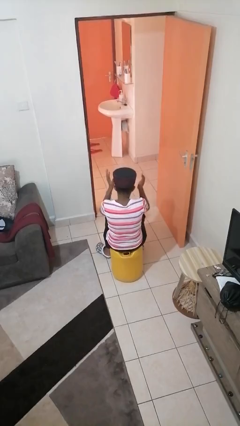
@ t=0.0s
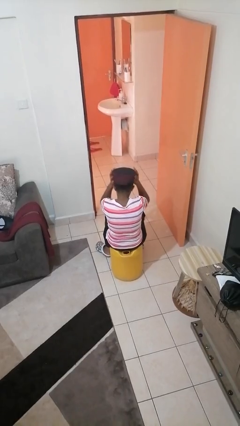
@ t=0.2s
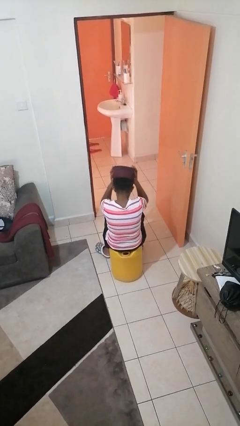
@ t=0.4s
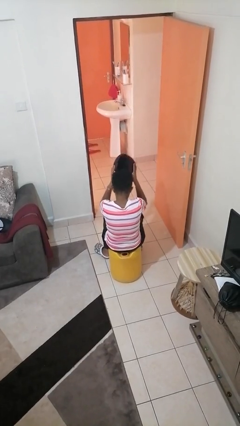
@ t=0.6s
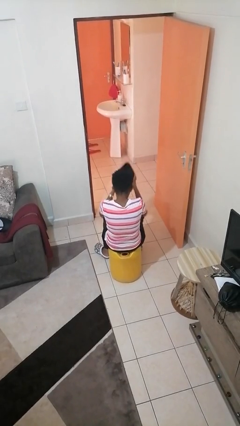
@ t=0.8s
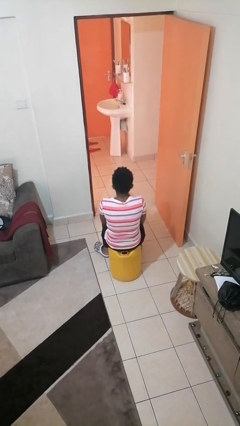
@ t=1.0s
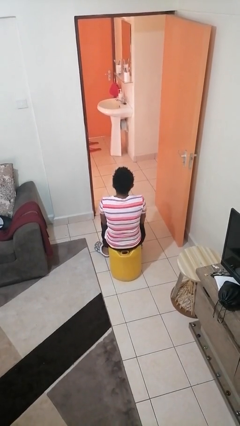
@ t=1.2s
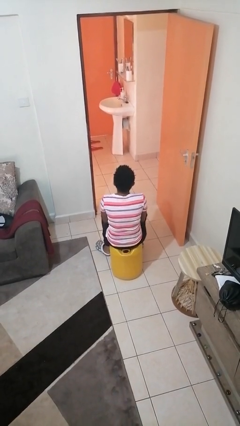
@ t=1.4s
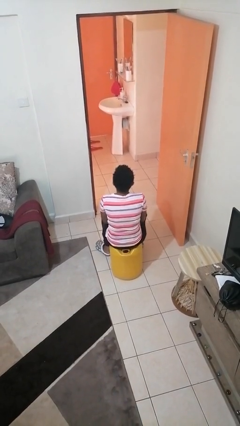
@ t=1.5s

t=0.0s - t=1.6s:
person takes off hat

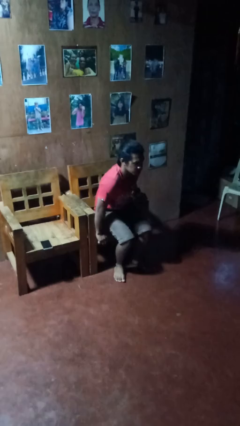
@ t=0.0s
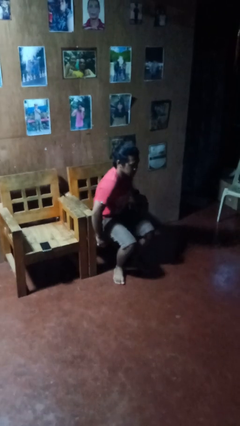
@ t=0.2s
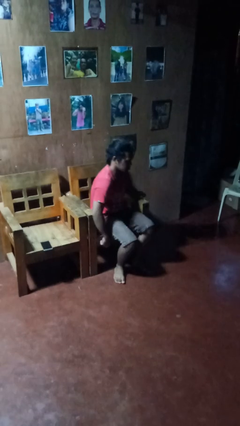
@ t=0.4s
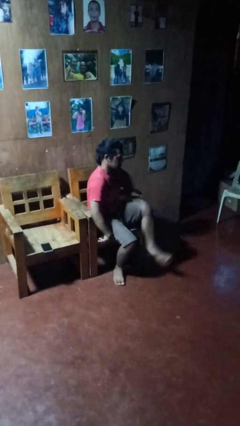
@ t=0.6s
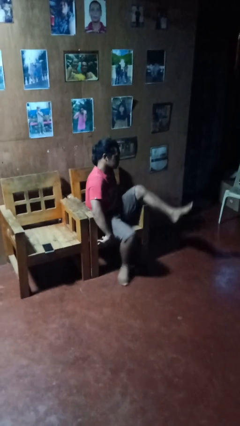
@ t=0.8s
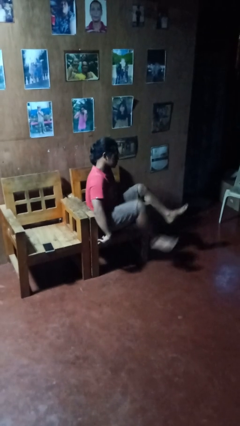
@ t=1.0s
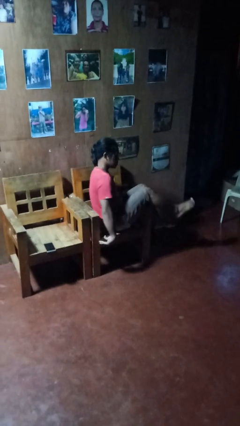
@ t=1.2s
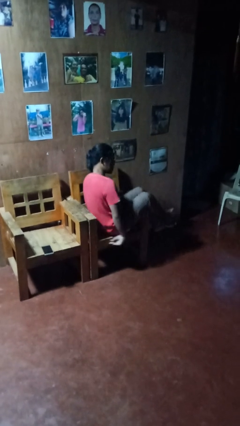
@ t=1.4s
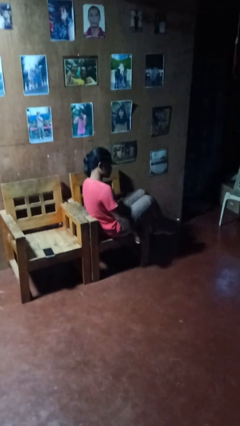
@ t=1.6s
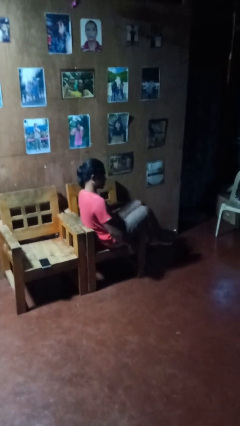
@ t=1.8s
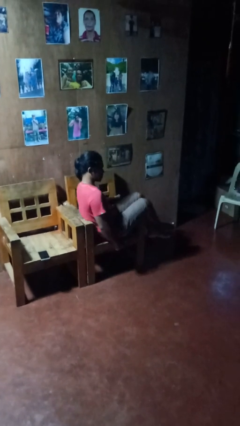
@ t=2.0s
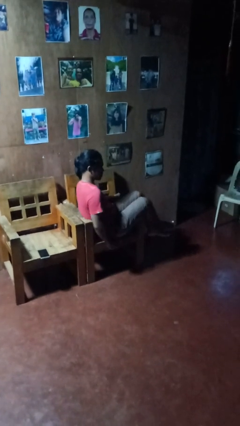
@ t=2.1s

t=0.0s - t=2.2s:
person sits down

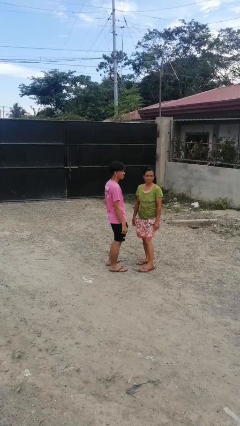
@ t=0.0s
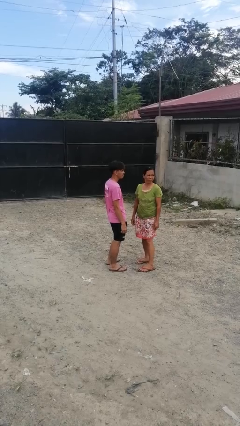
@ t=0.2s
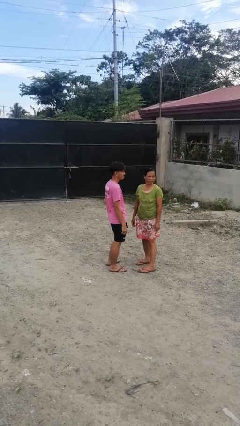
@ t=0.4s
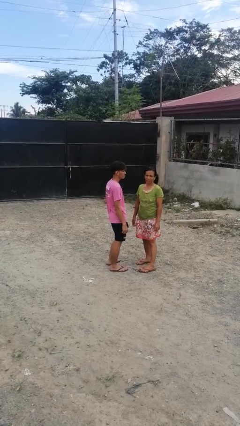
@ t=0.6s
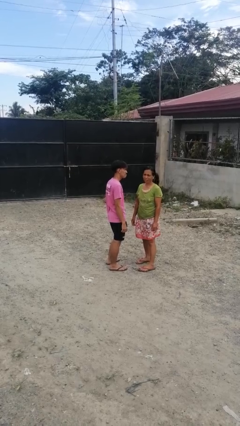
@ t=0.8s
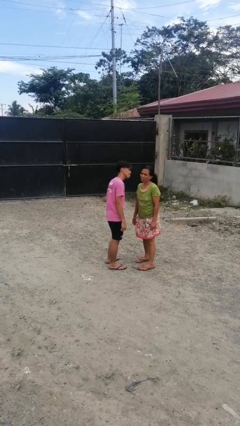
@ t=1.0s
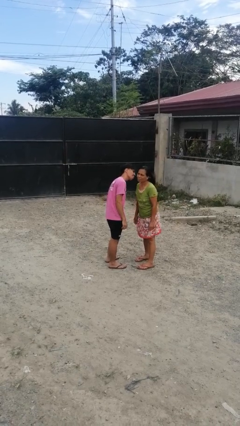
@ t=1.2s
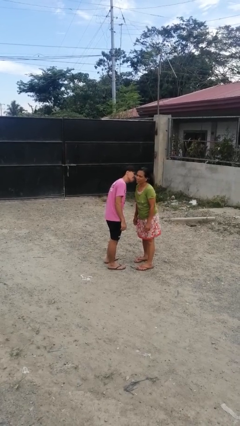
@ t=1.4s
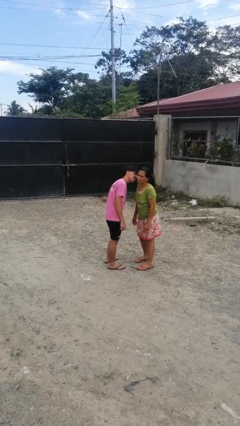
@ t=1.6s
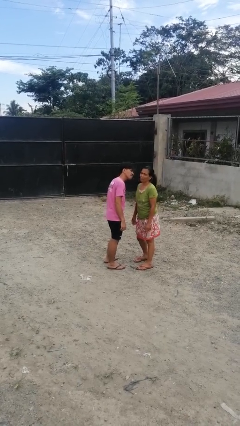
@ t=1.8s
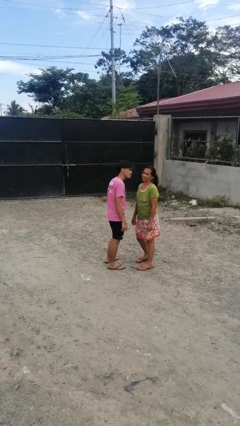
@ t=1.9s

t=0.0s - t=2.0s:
person kisses cheek of person

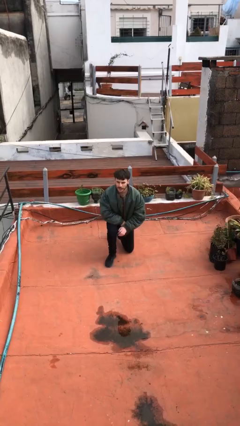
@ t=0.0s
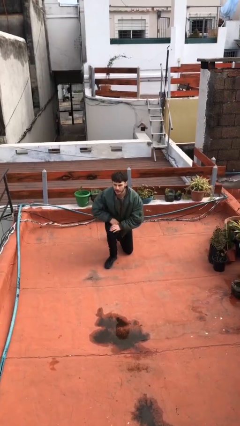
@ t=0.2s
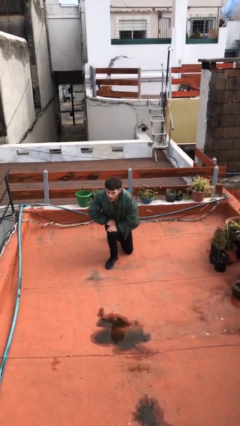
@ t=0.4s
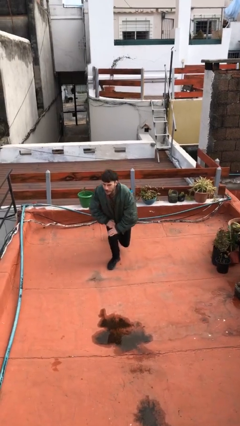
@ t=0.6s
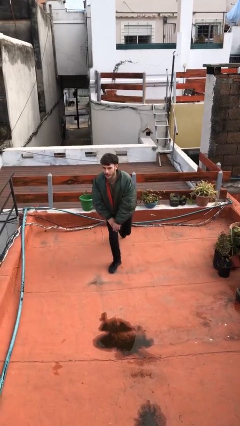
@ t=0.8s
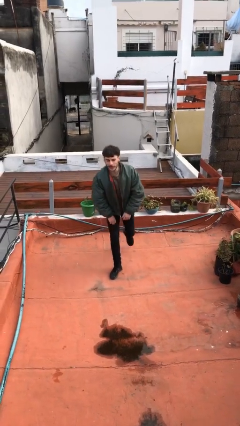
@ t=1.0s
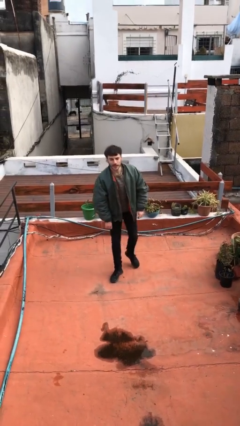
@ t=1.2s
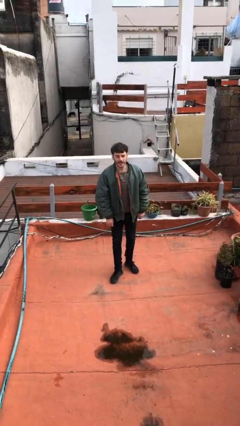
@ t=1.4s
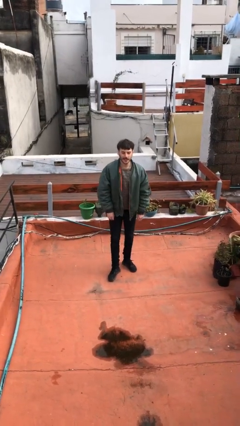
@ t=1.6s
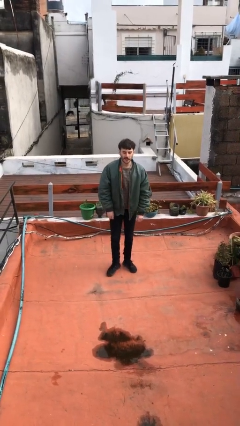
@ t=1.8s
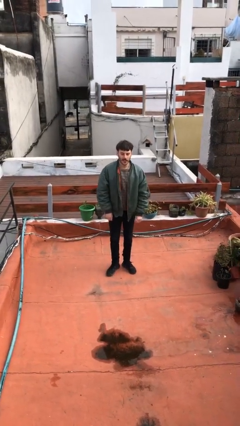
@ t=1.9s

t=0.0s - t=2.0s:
person stands up from floor

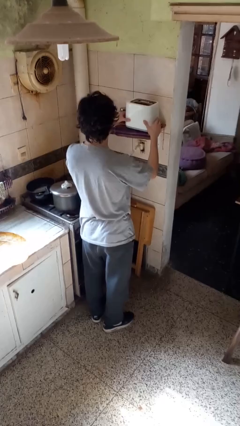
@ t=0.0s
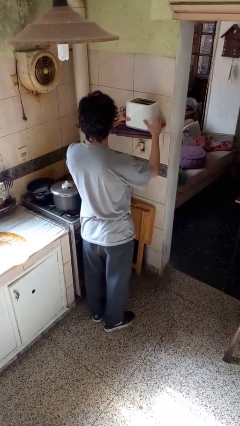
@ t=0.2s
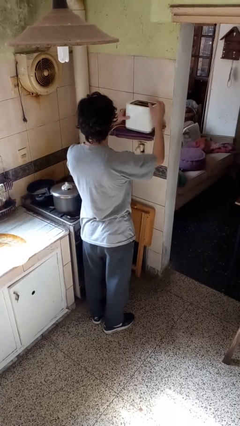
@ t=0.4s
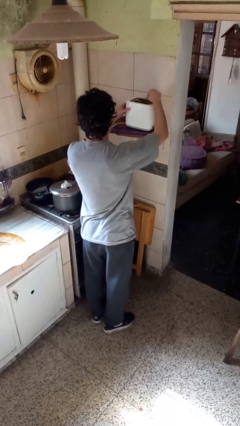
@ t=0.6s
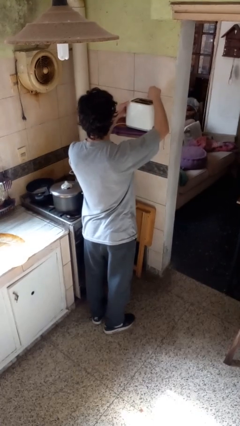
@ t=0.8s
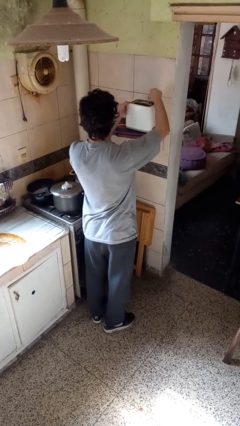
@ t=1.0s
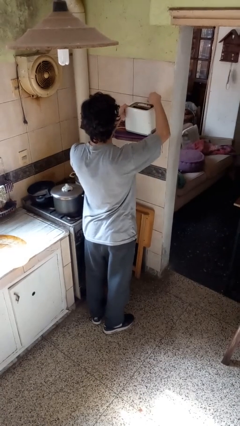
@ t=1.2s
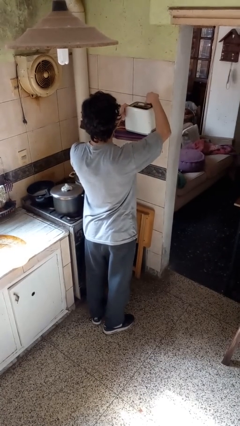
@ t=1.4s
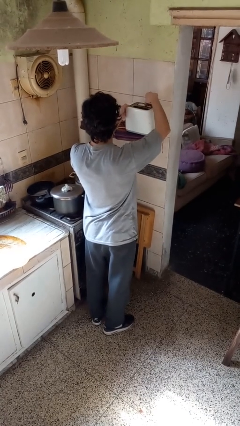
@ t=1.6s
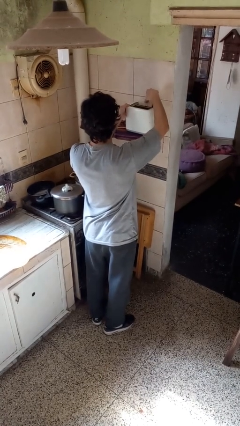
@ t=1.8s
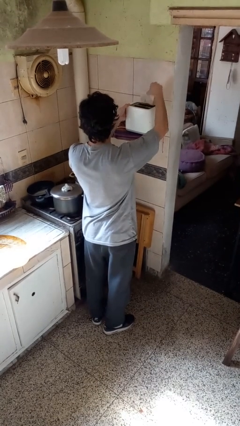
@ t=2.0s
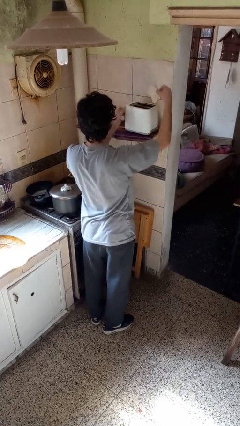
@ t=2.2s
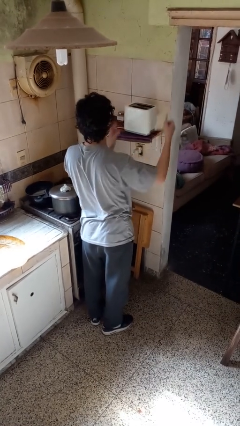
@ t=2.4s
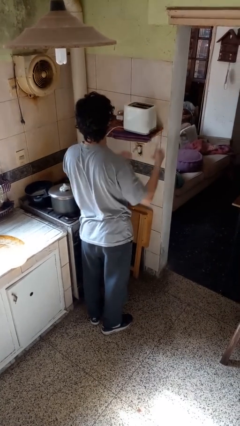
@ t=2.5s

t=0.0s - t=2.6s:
person takes object from toaster

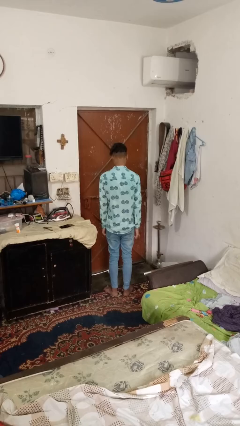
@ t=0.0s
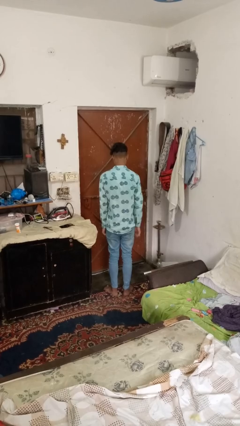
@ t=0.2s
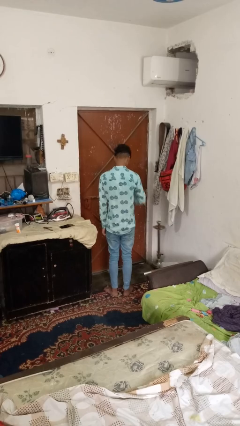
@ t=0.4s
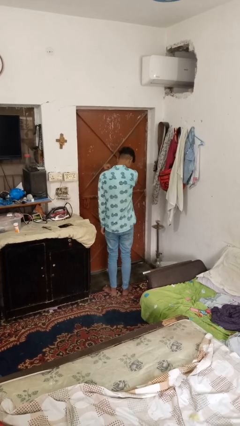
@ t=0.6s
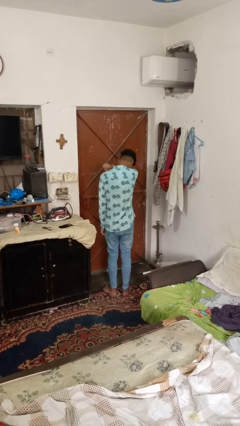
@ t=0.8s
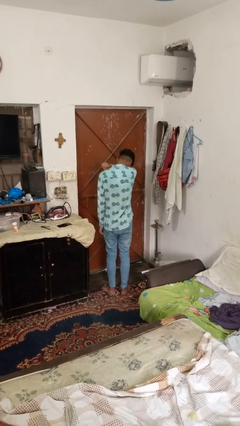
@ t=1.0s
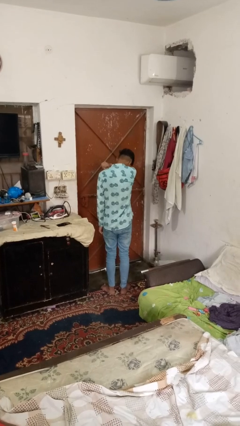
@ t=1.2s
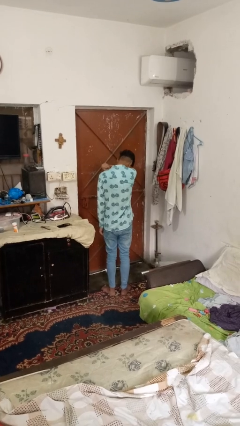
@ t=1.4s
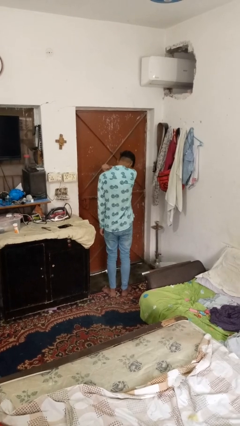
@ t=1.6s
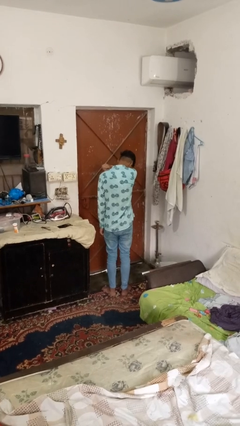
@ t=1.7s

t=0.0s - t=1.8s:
person sneezes into arm

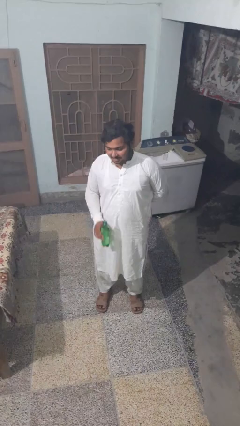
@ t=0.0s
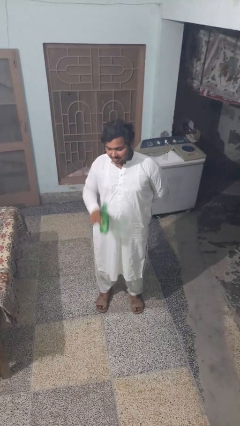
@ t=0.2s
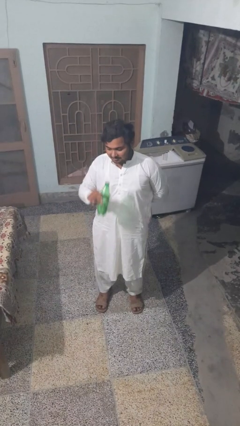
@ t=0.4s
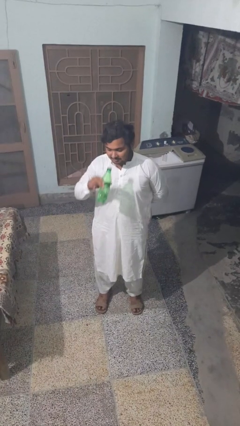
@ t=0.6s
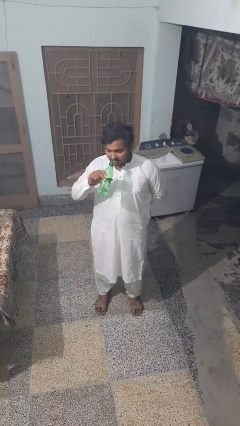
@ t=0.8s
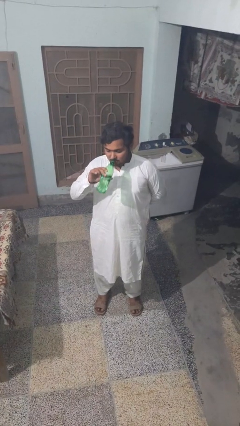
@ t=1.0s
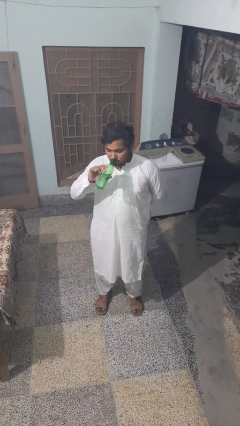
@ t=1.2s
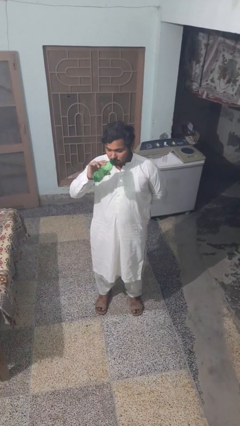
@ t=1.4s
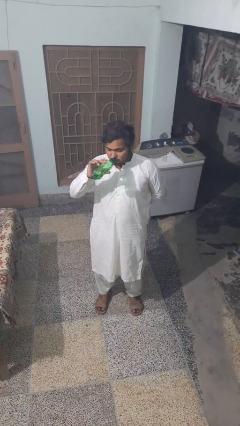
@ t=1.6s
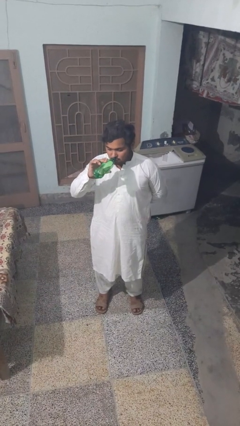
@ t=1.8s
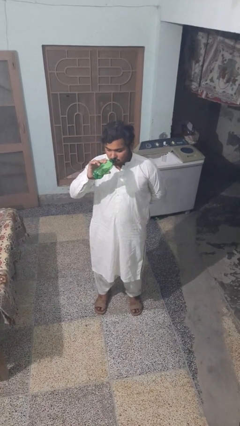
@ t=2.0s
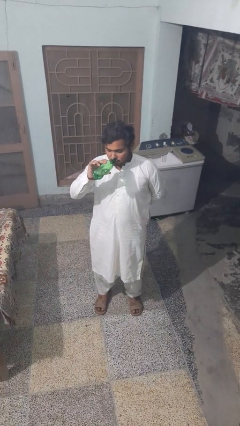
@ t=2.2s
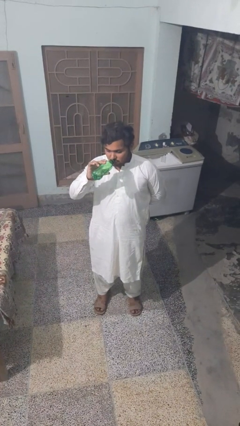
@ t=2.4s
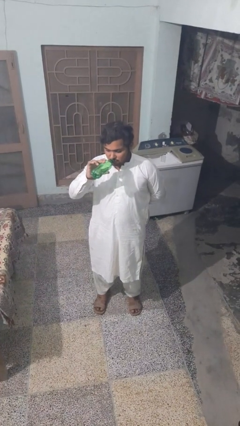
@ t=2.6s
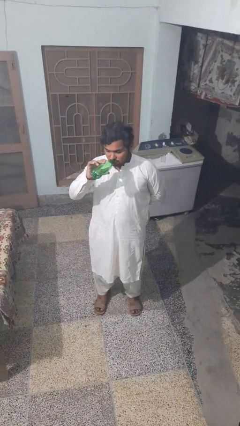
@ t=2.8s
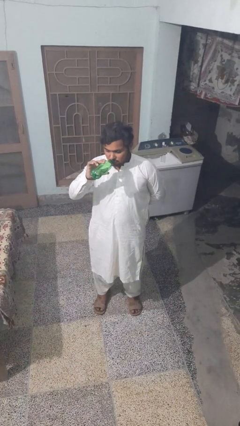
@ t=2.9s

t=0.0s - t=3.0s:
person drinks from bottle

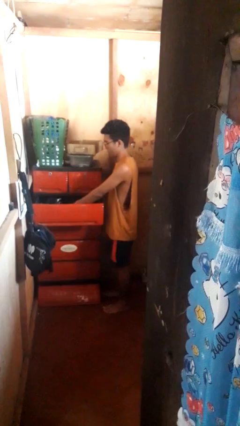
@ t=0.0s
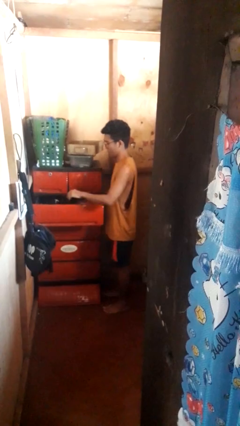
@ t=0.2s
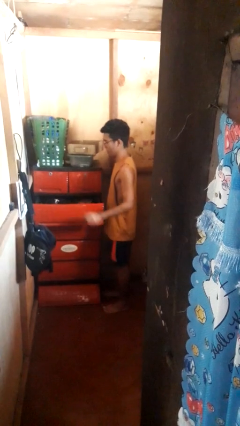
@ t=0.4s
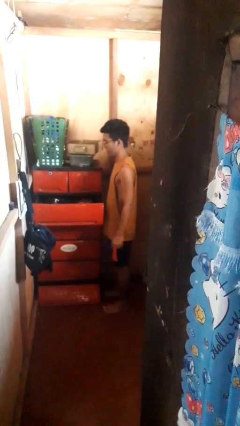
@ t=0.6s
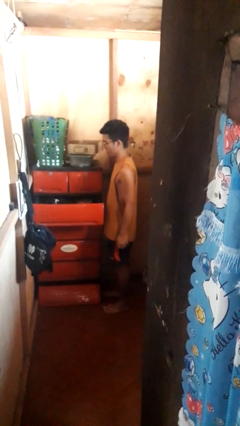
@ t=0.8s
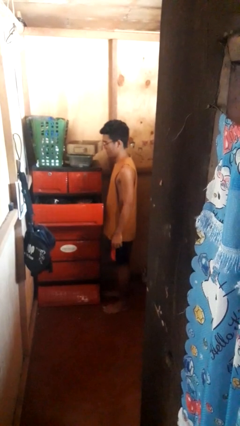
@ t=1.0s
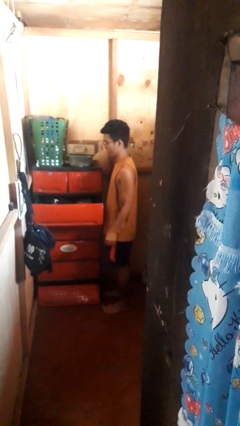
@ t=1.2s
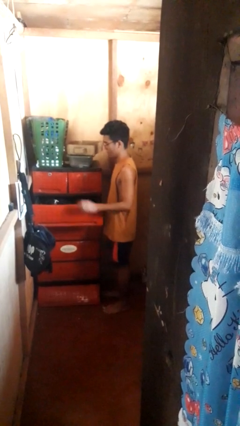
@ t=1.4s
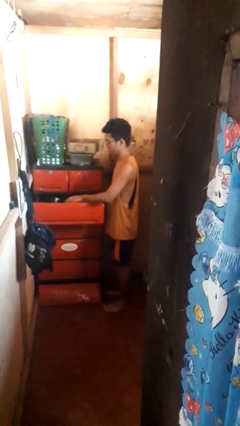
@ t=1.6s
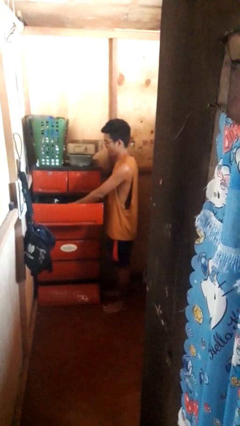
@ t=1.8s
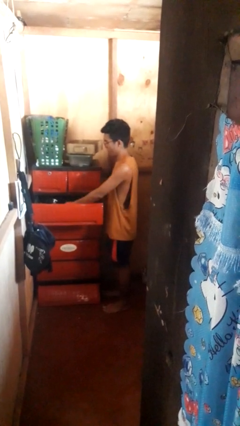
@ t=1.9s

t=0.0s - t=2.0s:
person puts clothes into dresser
